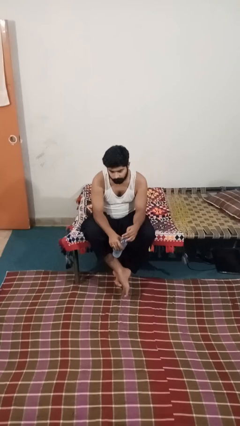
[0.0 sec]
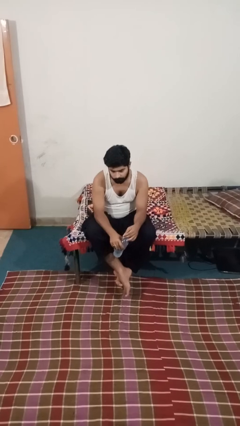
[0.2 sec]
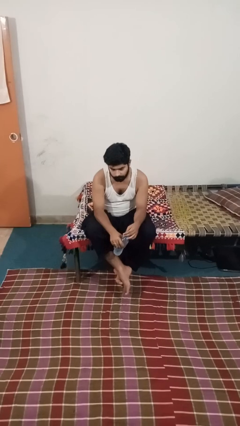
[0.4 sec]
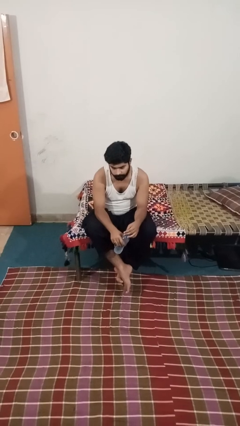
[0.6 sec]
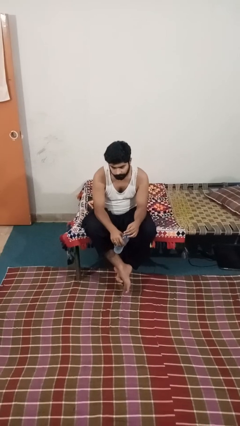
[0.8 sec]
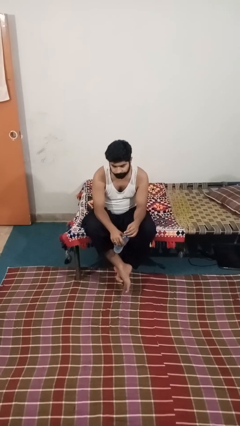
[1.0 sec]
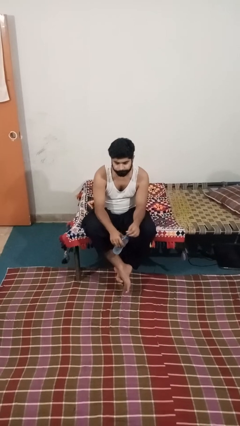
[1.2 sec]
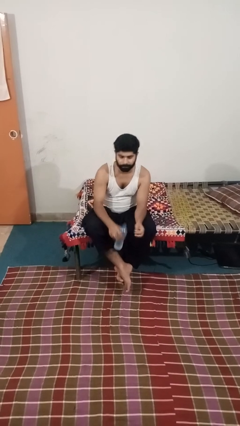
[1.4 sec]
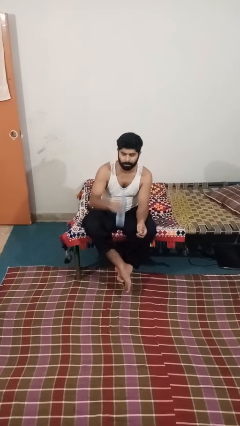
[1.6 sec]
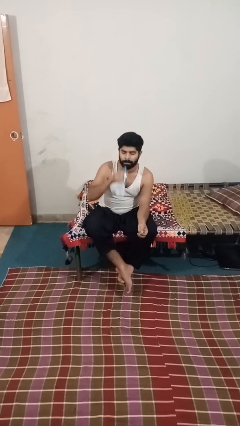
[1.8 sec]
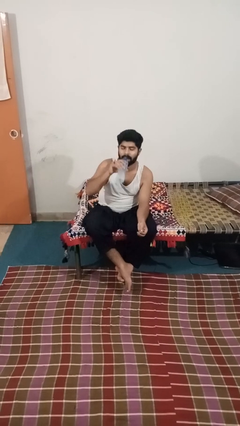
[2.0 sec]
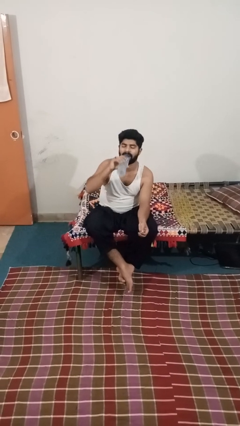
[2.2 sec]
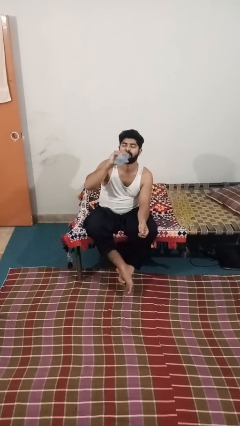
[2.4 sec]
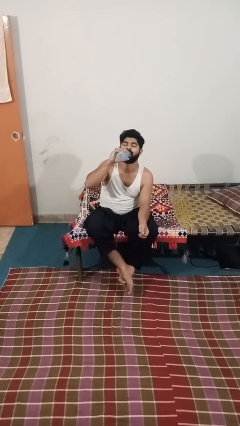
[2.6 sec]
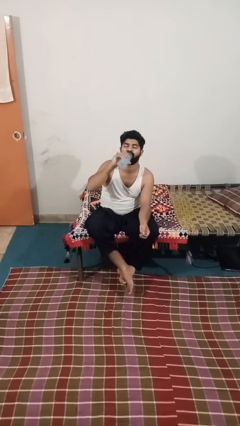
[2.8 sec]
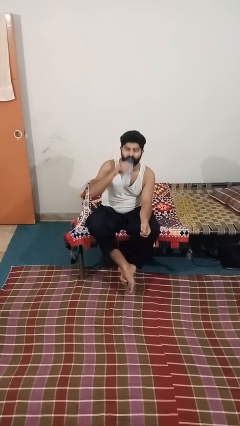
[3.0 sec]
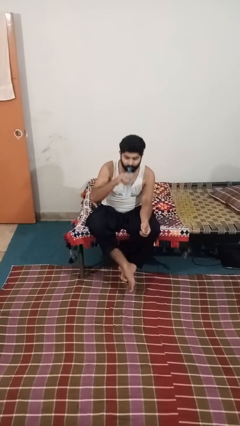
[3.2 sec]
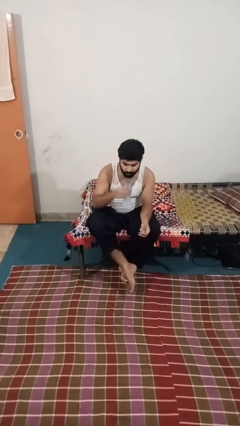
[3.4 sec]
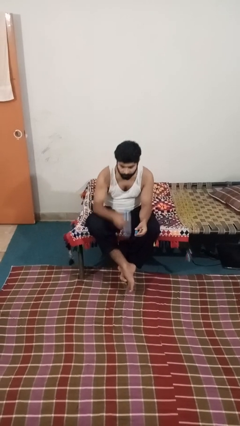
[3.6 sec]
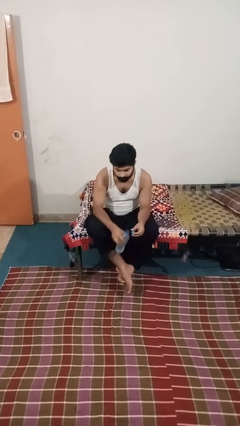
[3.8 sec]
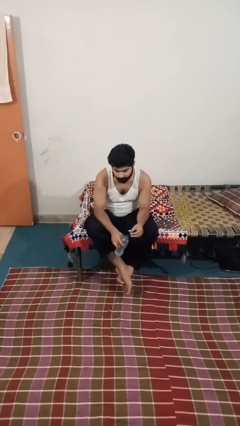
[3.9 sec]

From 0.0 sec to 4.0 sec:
person drinks from bottle

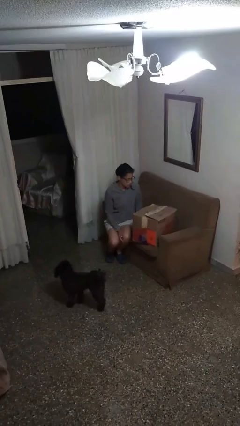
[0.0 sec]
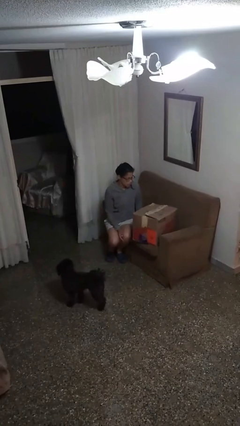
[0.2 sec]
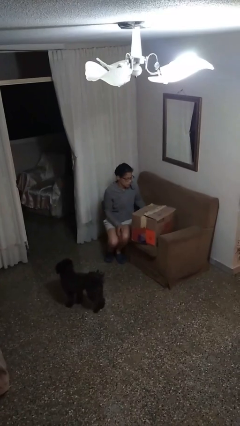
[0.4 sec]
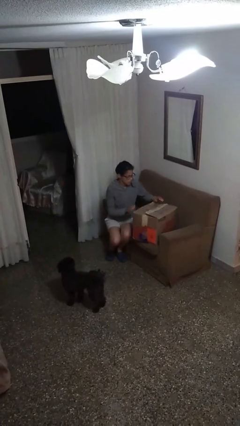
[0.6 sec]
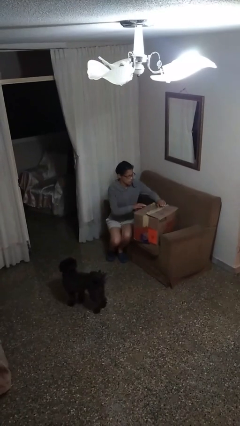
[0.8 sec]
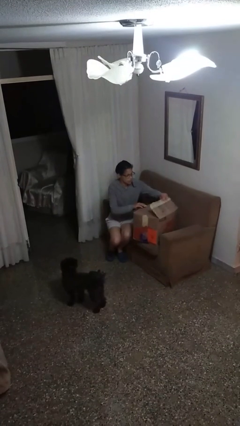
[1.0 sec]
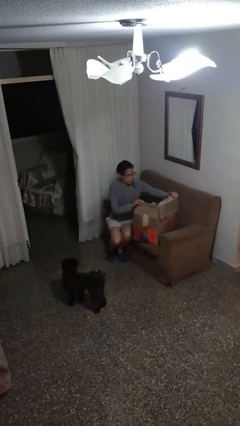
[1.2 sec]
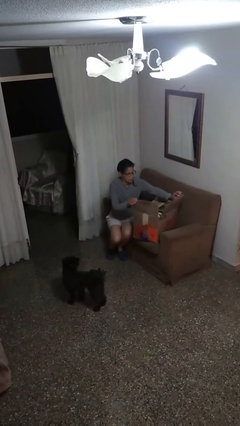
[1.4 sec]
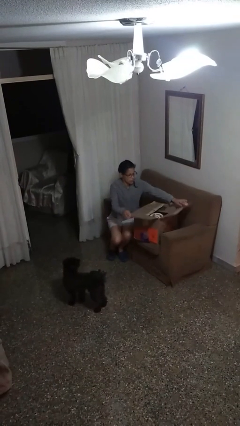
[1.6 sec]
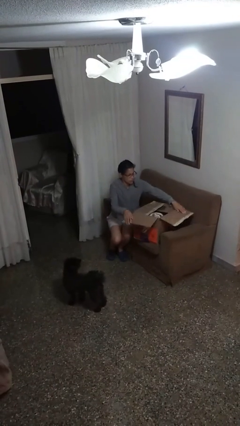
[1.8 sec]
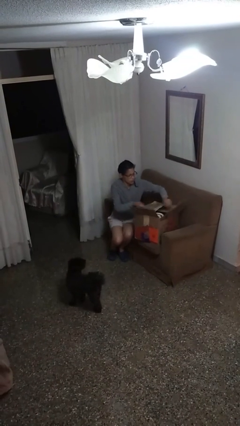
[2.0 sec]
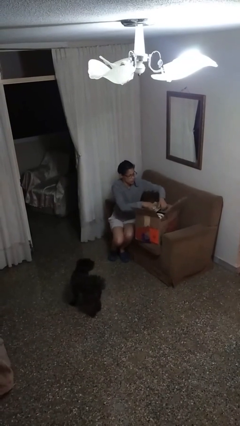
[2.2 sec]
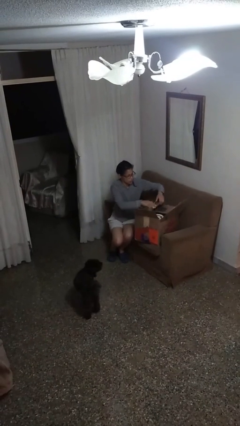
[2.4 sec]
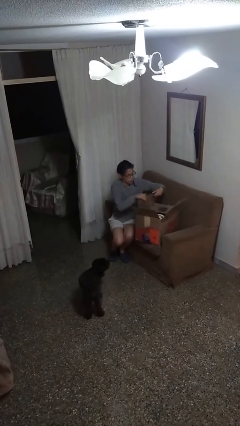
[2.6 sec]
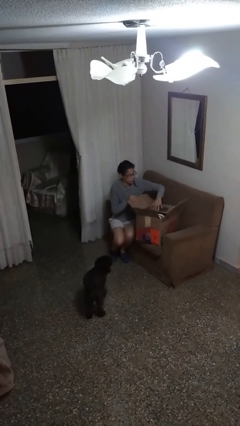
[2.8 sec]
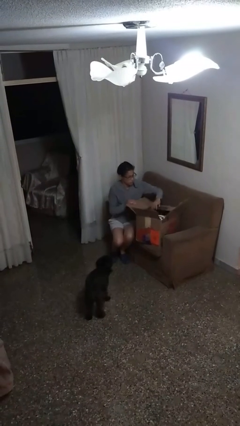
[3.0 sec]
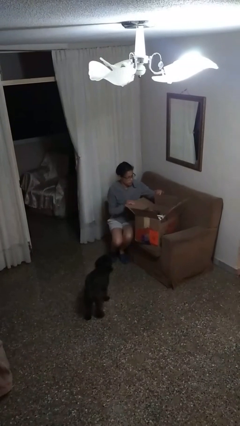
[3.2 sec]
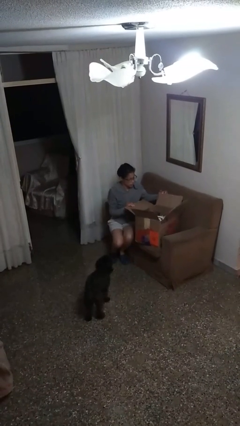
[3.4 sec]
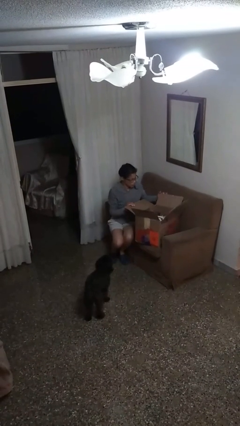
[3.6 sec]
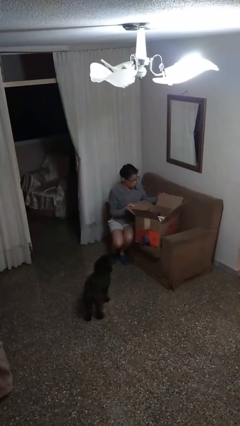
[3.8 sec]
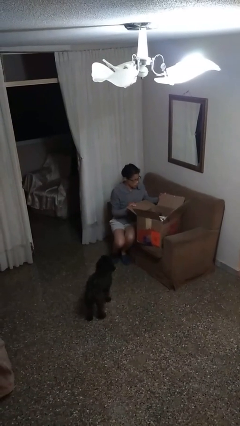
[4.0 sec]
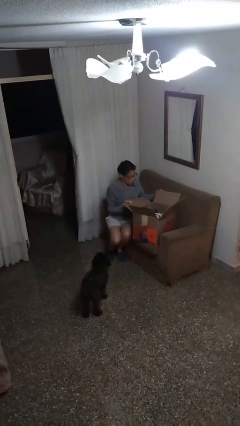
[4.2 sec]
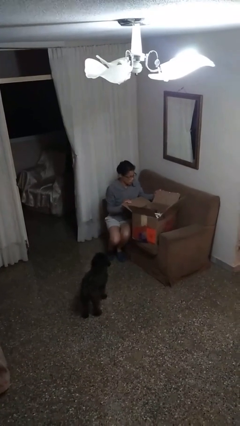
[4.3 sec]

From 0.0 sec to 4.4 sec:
person opens box

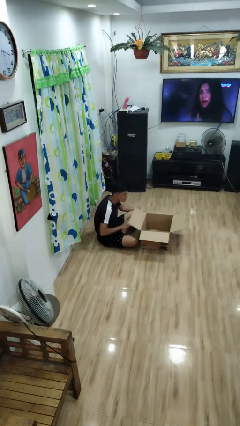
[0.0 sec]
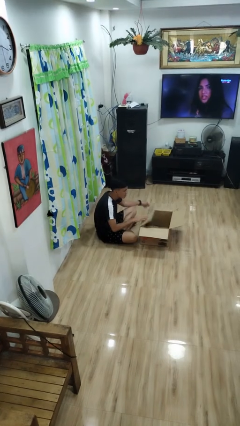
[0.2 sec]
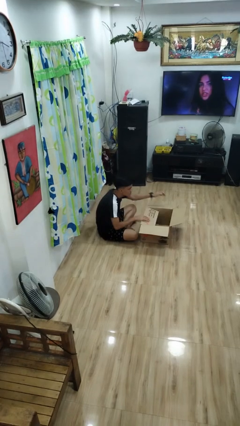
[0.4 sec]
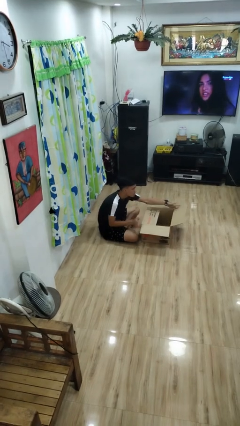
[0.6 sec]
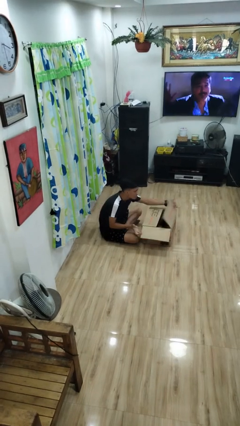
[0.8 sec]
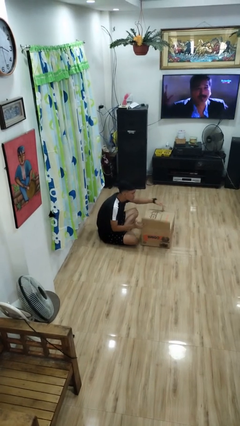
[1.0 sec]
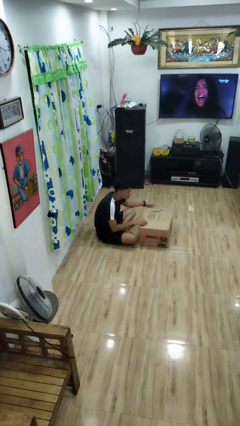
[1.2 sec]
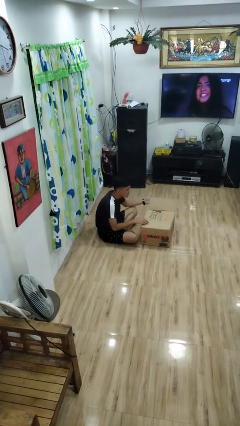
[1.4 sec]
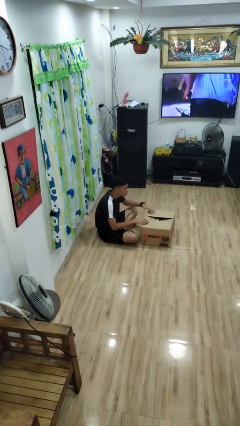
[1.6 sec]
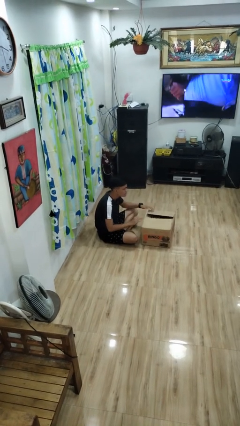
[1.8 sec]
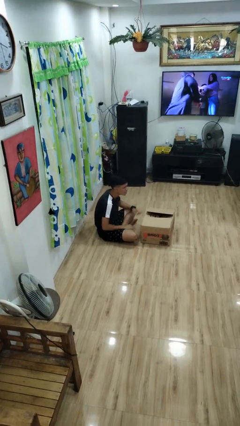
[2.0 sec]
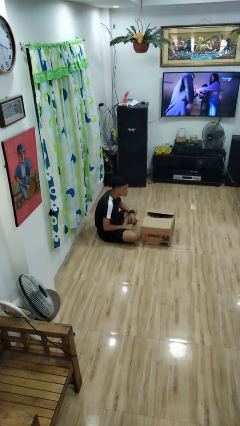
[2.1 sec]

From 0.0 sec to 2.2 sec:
person closes box

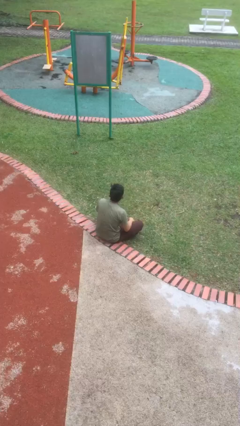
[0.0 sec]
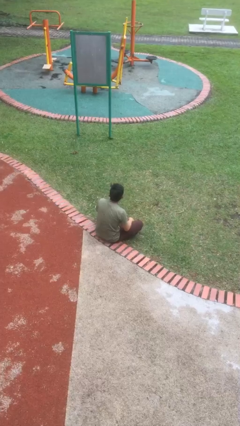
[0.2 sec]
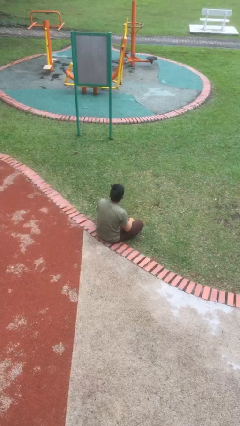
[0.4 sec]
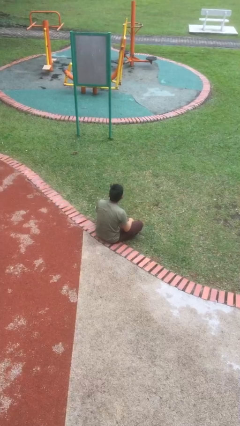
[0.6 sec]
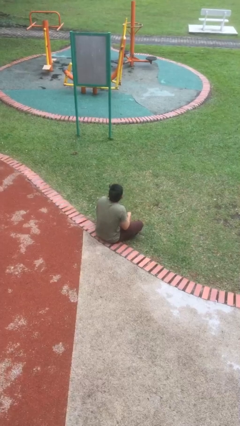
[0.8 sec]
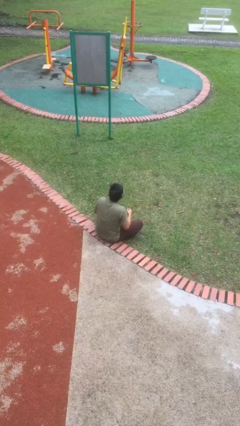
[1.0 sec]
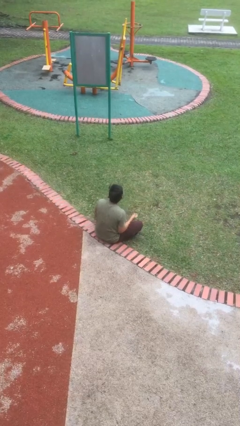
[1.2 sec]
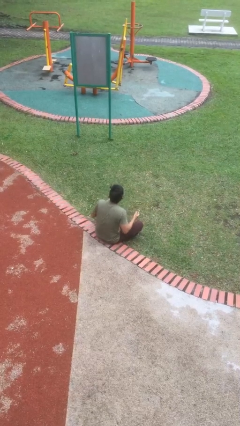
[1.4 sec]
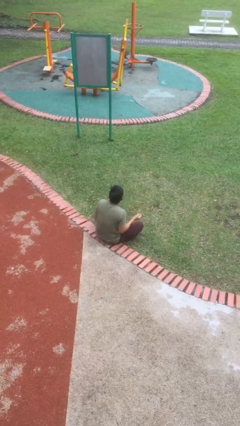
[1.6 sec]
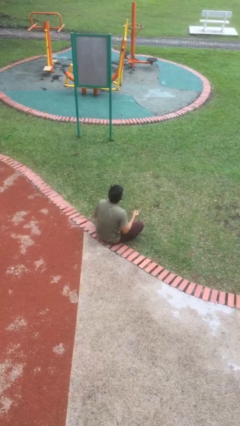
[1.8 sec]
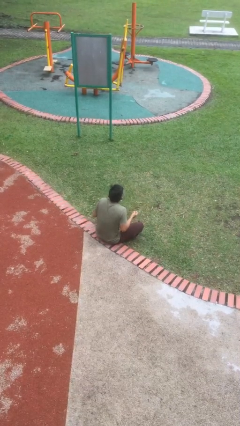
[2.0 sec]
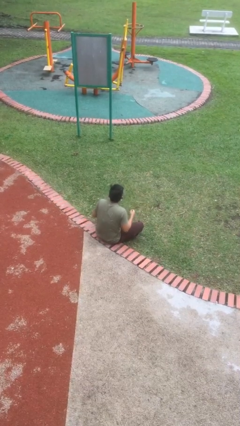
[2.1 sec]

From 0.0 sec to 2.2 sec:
person shrugs

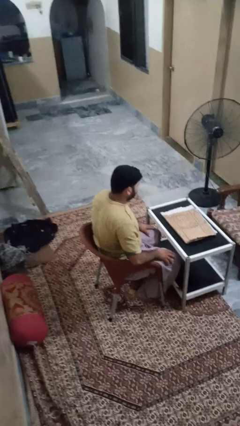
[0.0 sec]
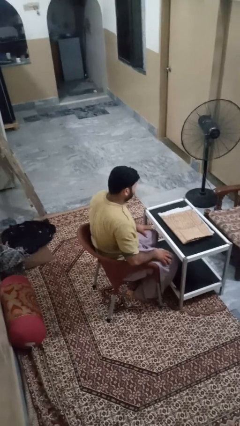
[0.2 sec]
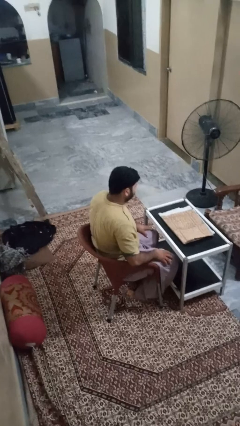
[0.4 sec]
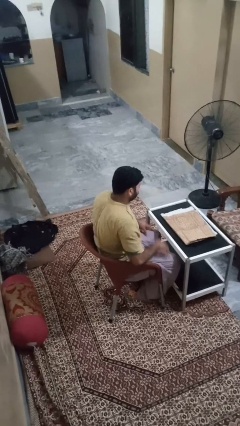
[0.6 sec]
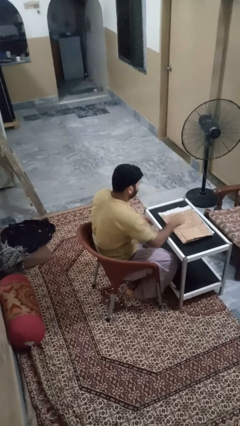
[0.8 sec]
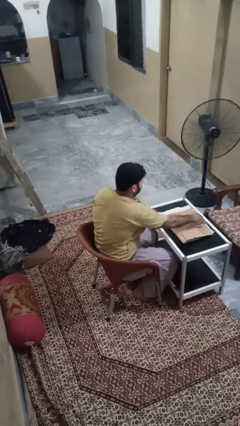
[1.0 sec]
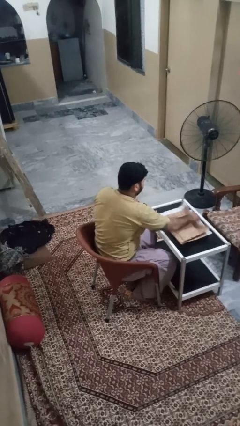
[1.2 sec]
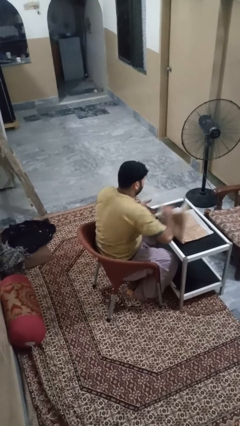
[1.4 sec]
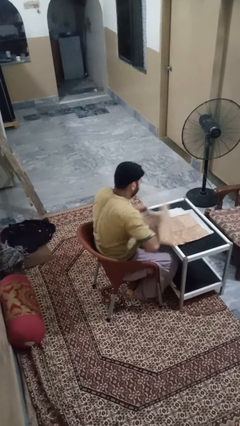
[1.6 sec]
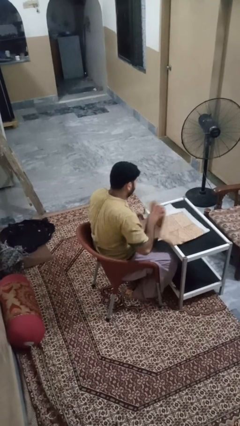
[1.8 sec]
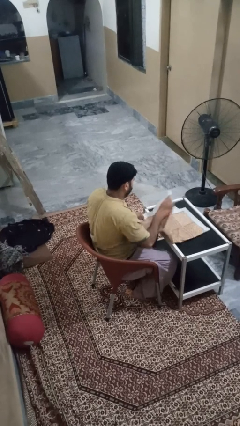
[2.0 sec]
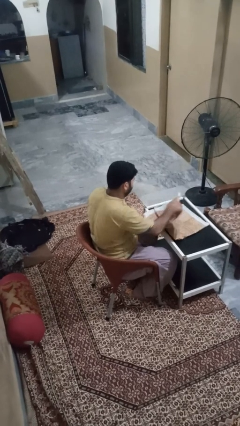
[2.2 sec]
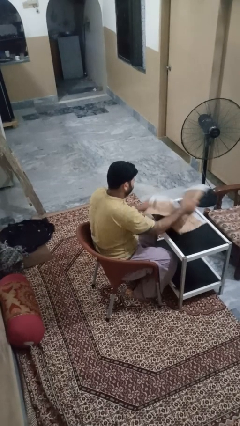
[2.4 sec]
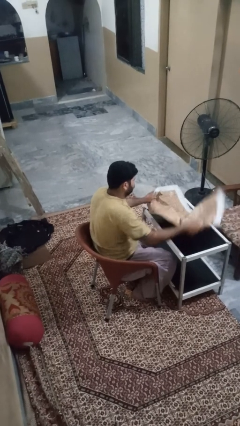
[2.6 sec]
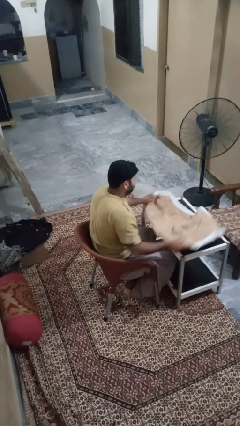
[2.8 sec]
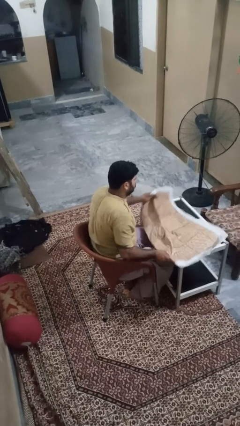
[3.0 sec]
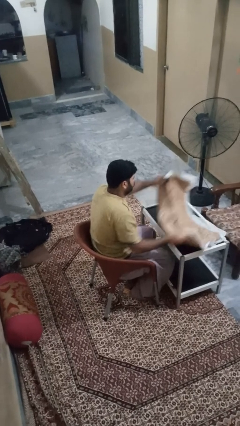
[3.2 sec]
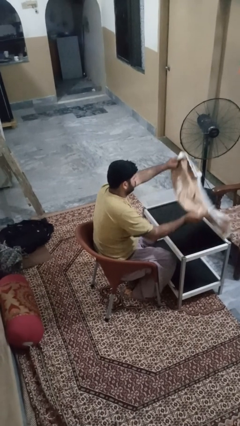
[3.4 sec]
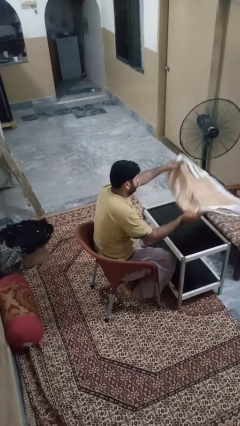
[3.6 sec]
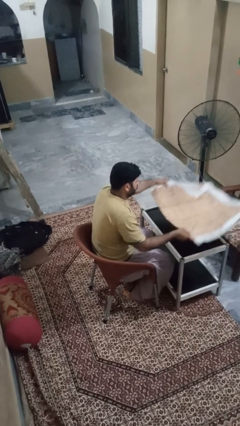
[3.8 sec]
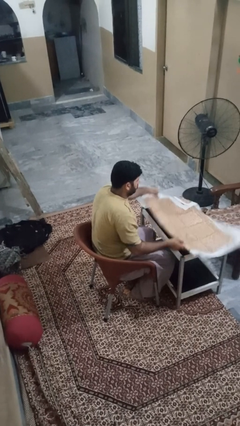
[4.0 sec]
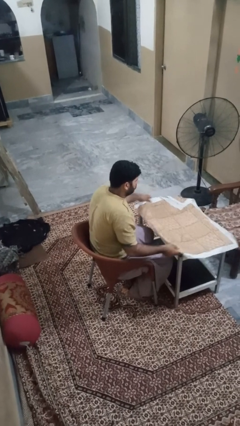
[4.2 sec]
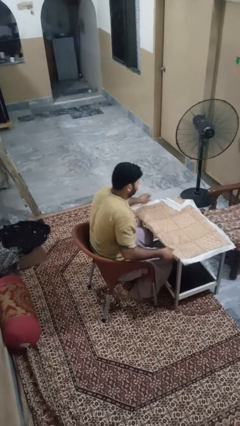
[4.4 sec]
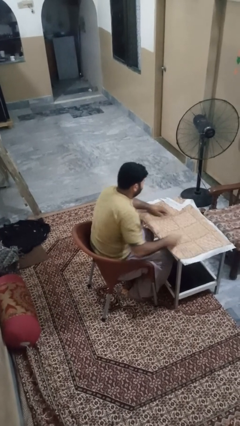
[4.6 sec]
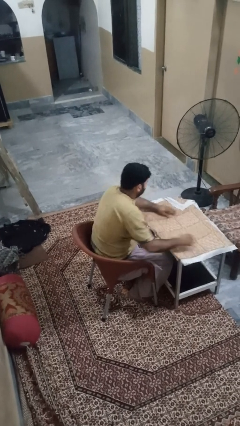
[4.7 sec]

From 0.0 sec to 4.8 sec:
person spreads tablecloth
